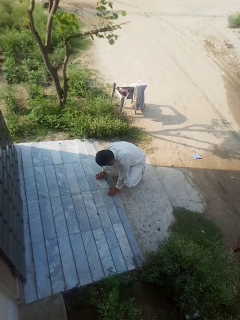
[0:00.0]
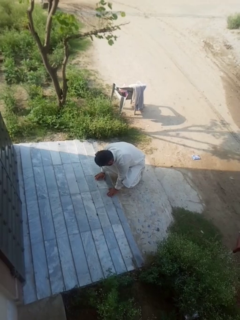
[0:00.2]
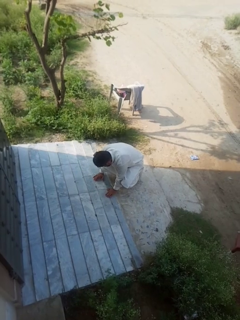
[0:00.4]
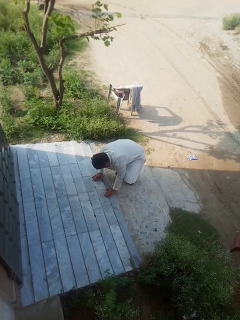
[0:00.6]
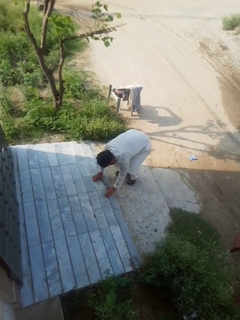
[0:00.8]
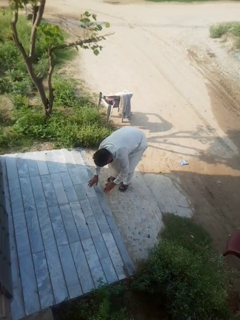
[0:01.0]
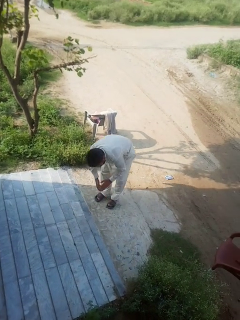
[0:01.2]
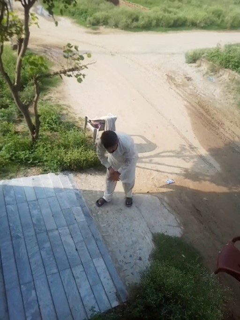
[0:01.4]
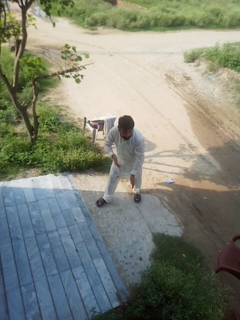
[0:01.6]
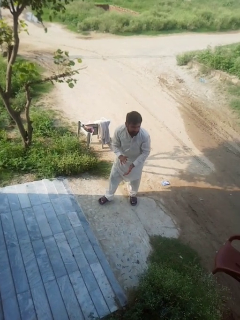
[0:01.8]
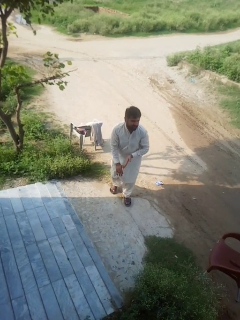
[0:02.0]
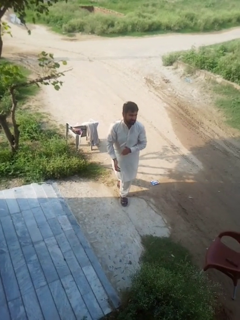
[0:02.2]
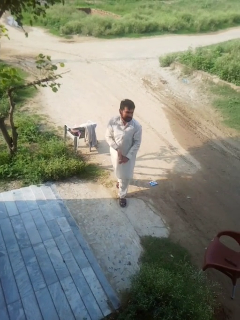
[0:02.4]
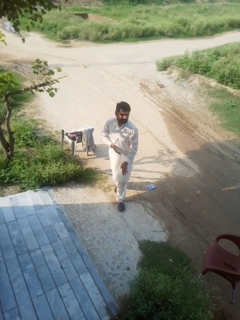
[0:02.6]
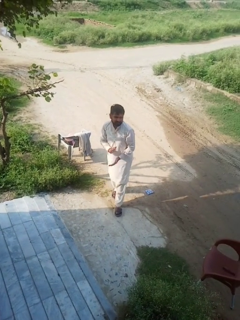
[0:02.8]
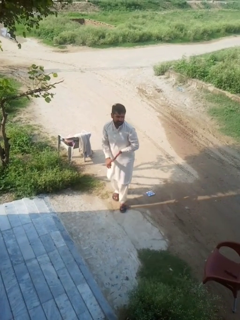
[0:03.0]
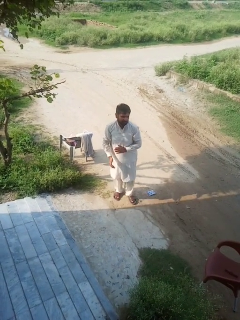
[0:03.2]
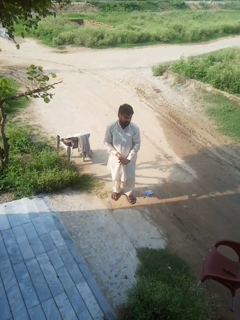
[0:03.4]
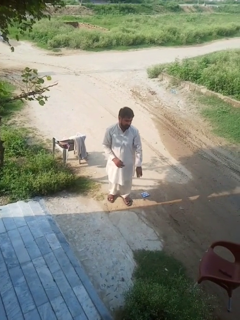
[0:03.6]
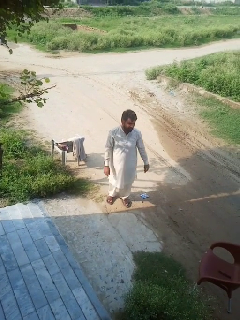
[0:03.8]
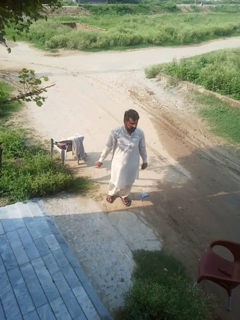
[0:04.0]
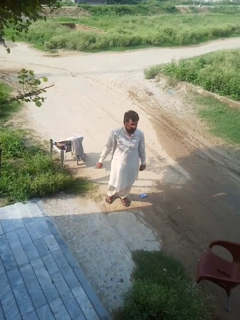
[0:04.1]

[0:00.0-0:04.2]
person stands up from floor

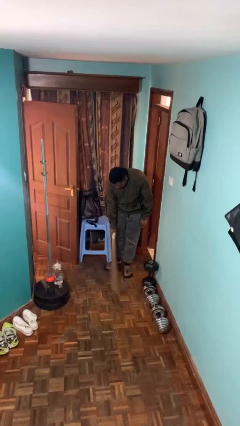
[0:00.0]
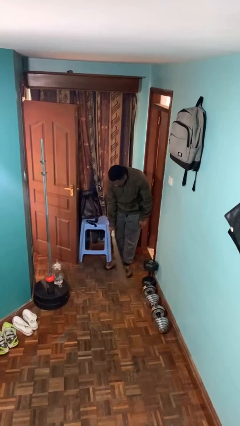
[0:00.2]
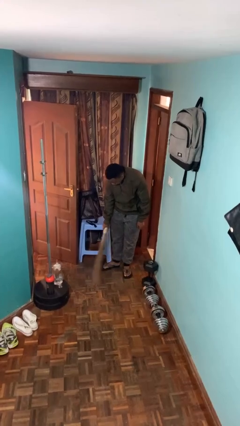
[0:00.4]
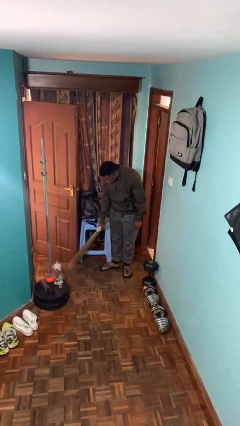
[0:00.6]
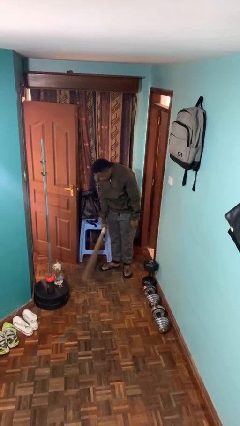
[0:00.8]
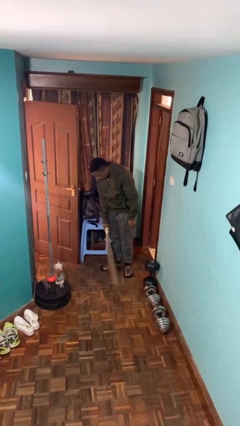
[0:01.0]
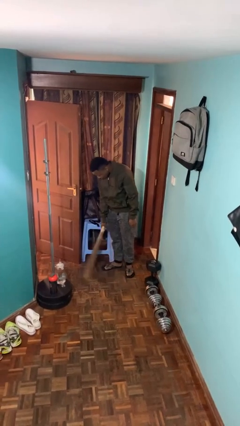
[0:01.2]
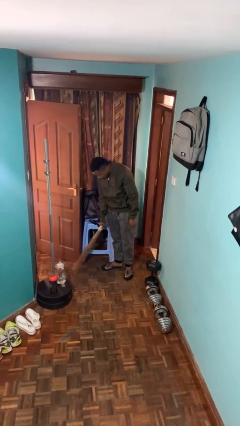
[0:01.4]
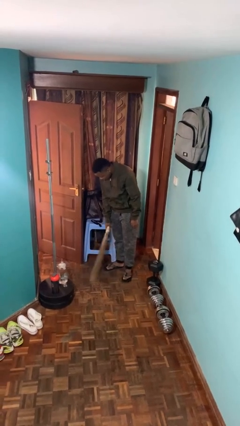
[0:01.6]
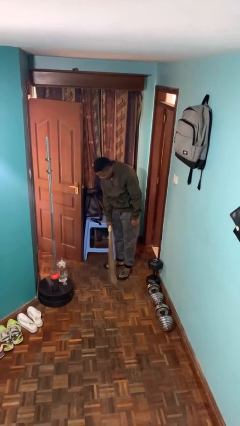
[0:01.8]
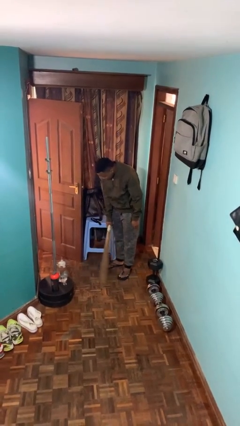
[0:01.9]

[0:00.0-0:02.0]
person sweeps floor

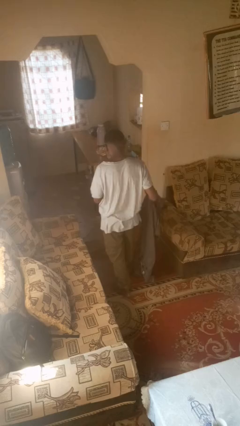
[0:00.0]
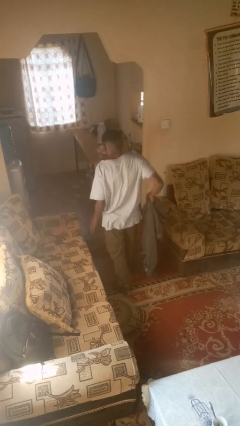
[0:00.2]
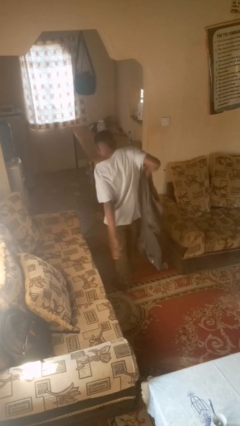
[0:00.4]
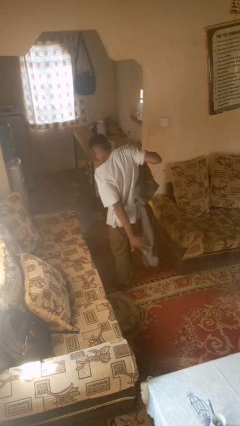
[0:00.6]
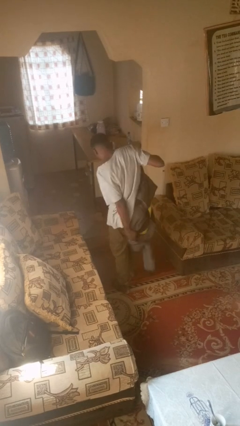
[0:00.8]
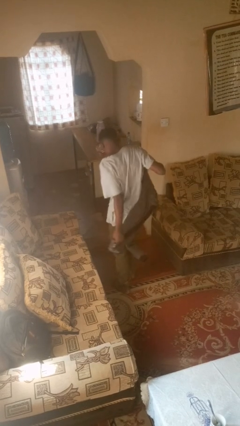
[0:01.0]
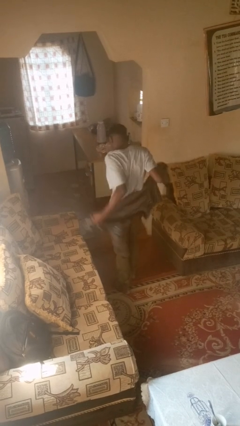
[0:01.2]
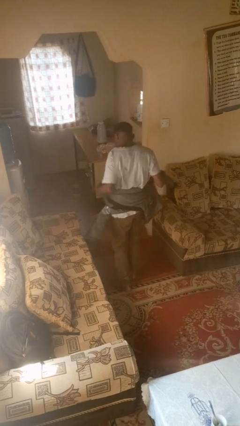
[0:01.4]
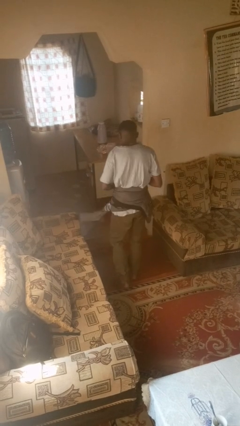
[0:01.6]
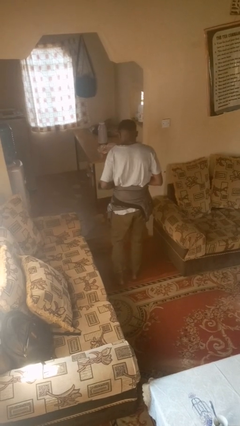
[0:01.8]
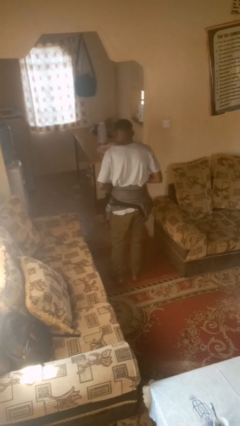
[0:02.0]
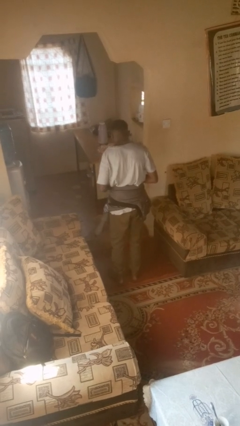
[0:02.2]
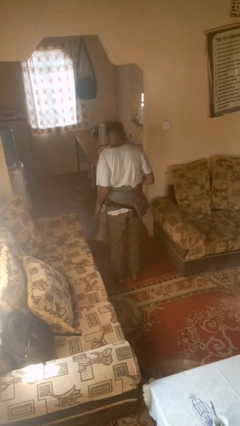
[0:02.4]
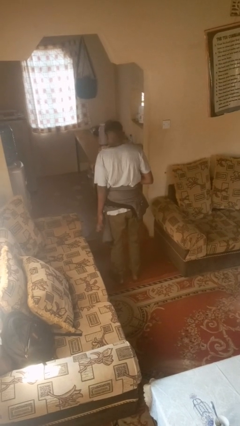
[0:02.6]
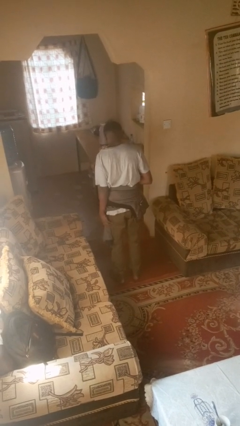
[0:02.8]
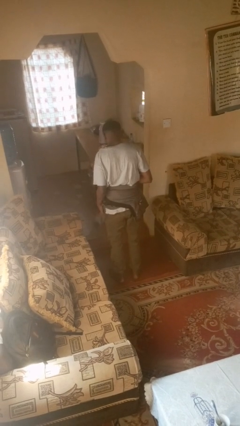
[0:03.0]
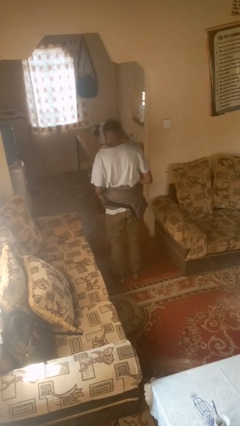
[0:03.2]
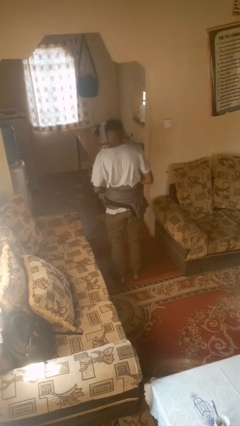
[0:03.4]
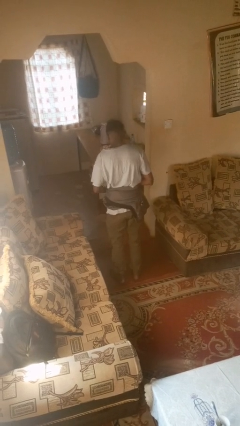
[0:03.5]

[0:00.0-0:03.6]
person ties jacket around waist

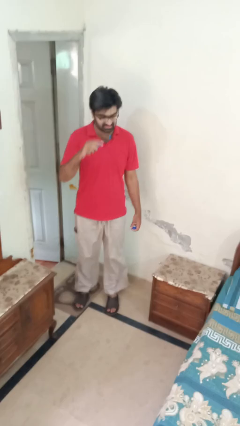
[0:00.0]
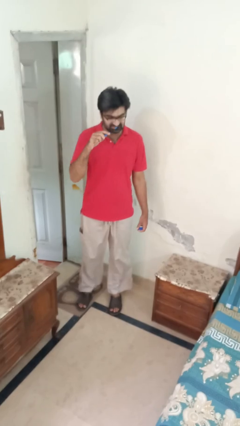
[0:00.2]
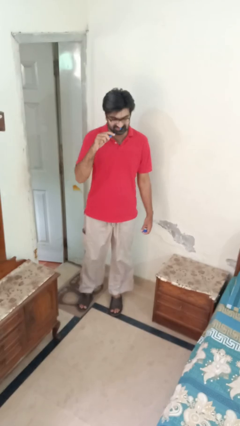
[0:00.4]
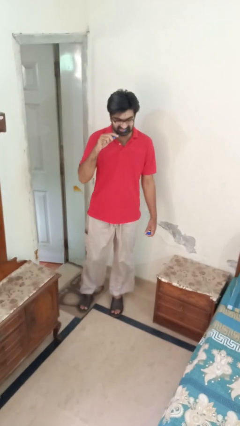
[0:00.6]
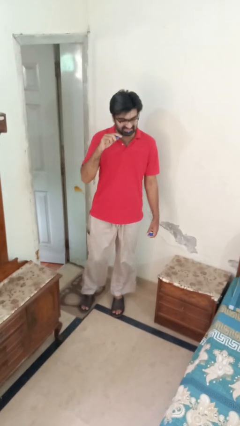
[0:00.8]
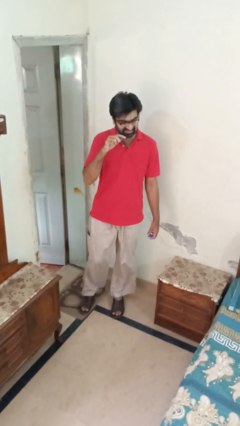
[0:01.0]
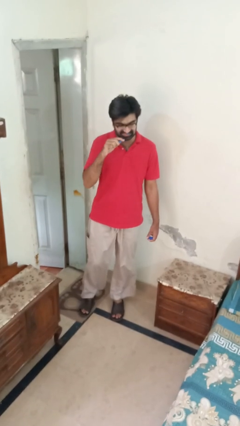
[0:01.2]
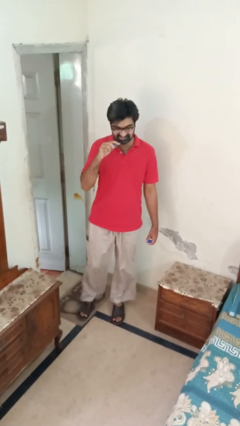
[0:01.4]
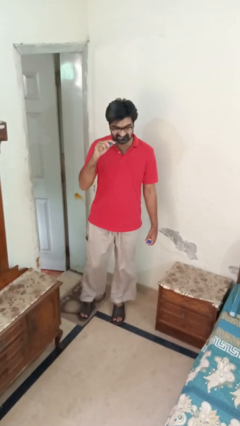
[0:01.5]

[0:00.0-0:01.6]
person brushes teeth

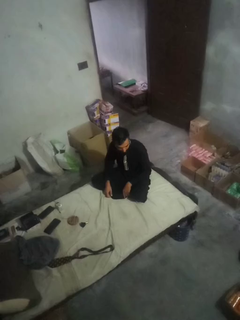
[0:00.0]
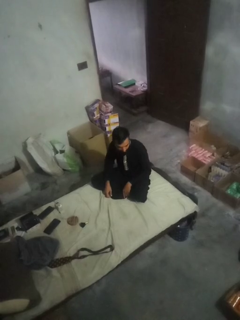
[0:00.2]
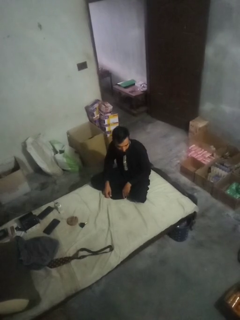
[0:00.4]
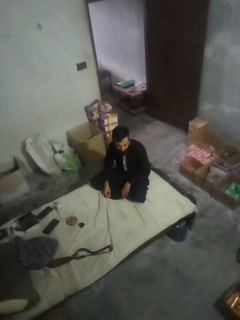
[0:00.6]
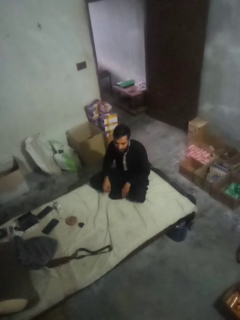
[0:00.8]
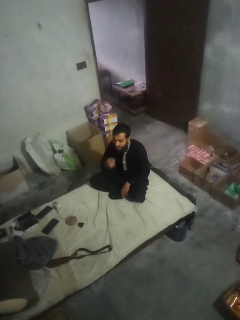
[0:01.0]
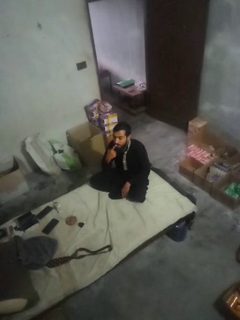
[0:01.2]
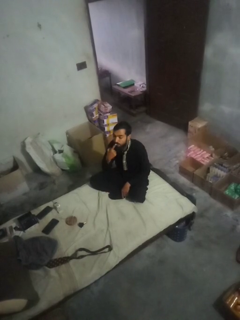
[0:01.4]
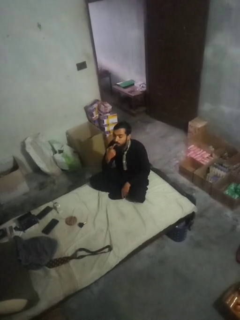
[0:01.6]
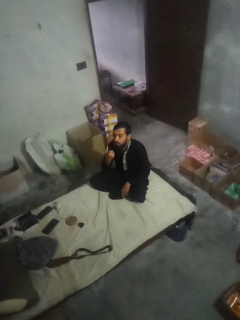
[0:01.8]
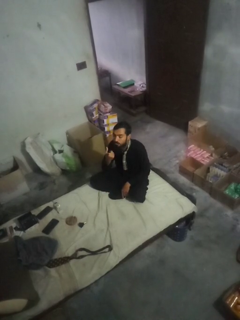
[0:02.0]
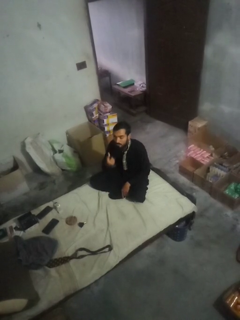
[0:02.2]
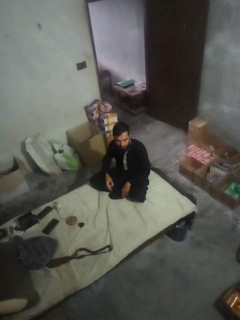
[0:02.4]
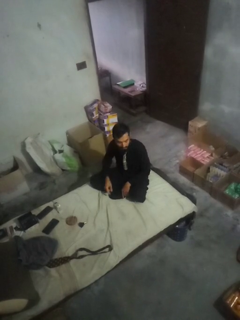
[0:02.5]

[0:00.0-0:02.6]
person gestures blow kiss

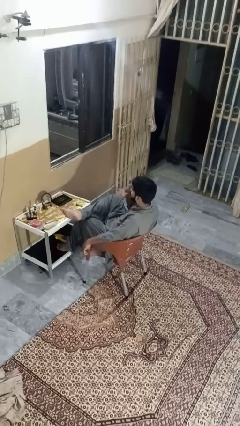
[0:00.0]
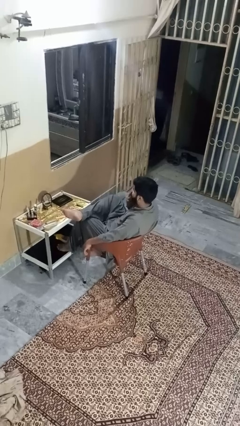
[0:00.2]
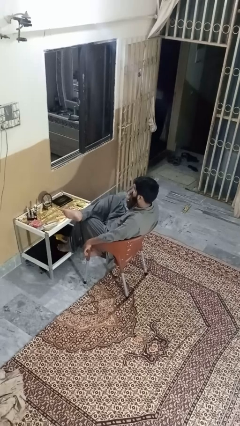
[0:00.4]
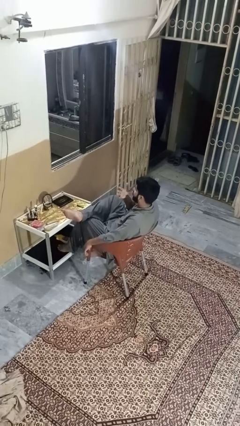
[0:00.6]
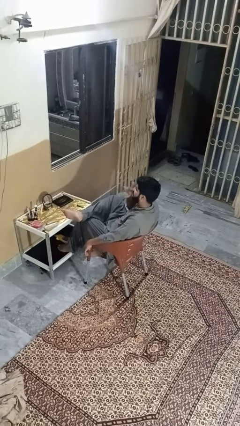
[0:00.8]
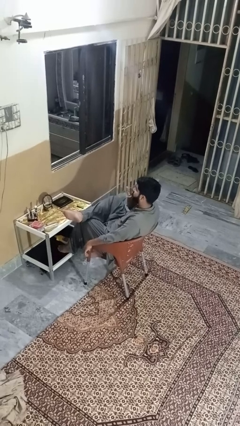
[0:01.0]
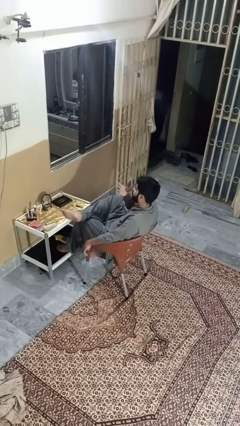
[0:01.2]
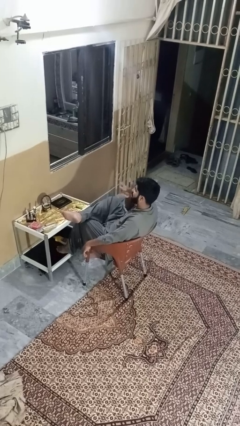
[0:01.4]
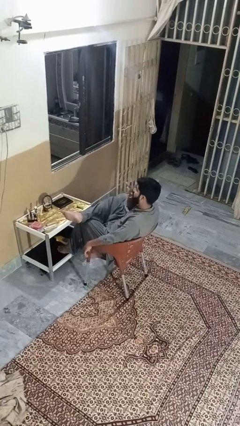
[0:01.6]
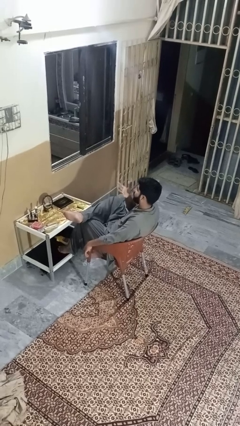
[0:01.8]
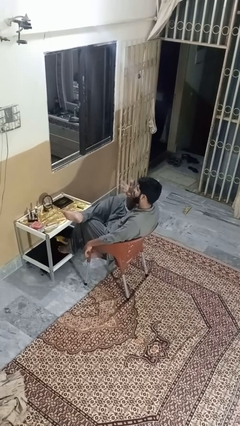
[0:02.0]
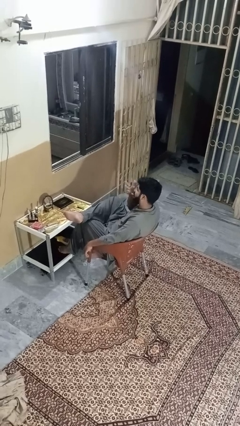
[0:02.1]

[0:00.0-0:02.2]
person licks fingers

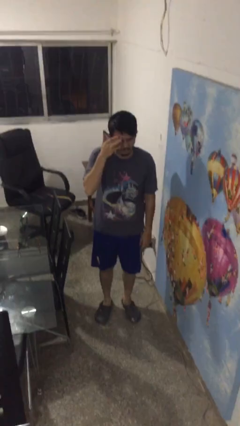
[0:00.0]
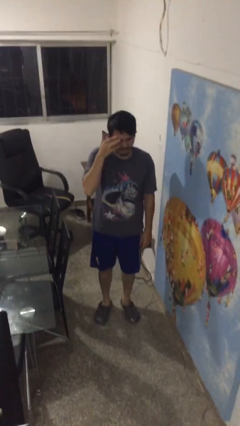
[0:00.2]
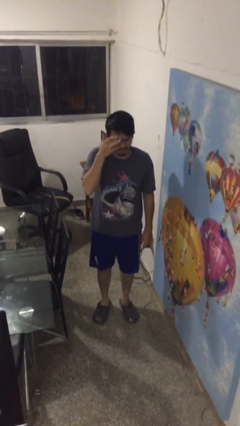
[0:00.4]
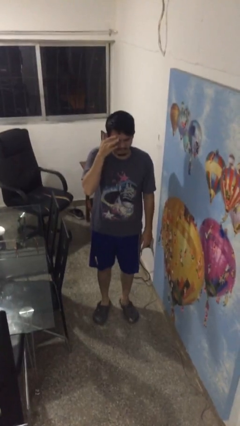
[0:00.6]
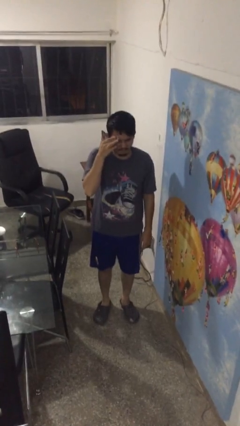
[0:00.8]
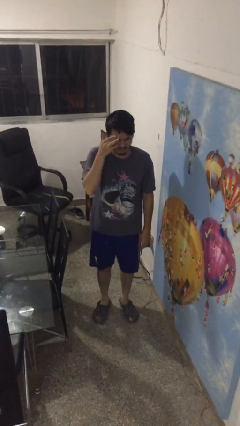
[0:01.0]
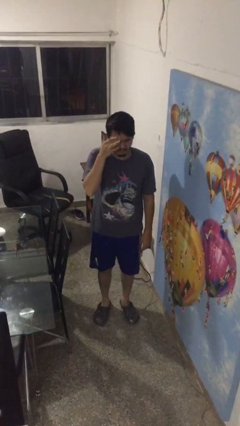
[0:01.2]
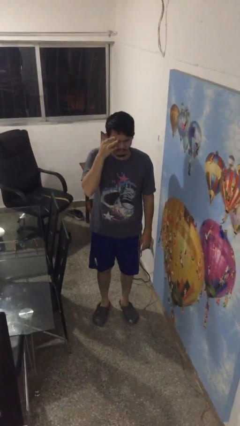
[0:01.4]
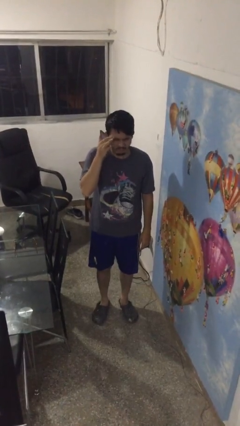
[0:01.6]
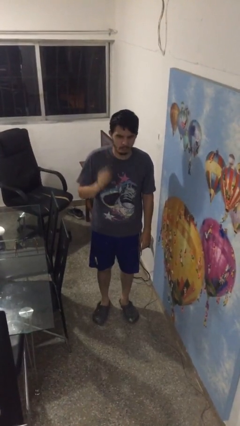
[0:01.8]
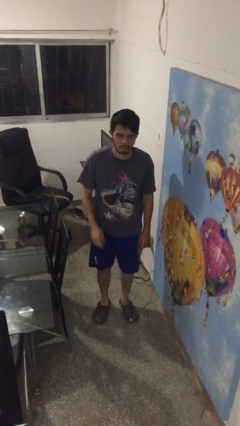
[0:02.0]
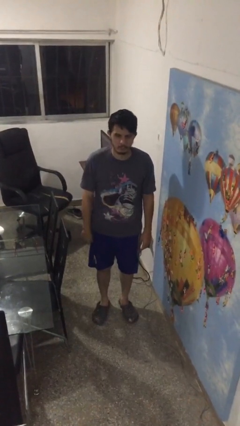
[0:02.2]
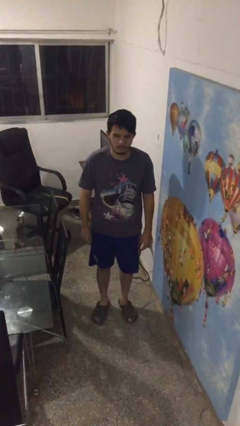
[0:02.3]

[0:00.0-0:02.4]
person scratches face
